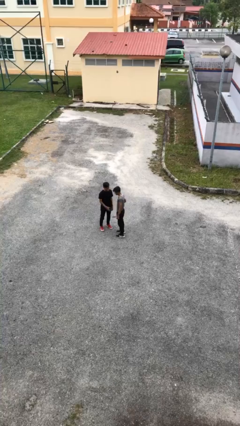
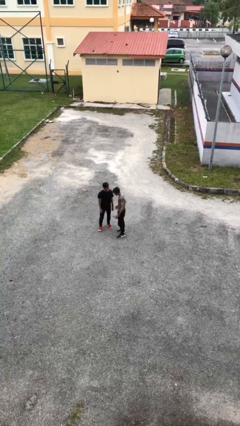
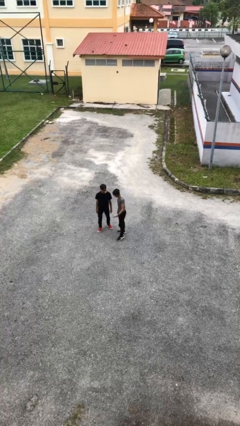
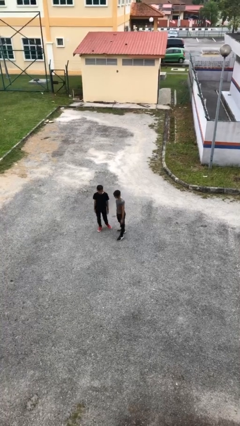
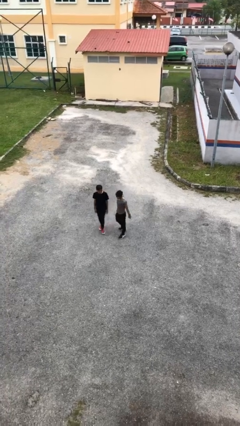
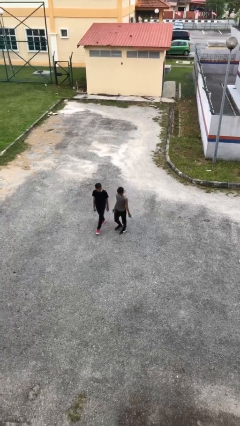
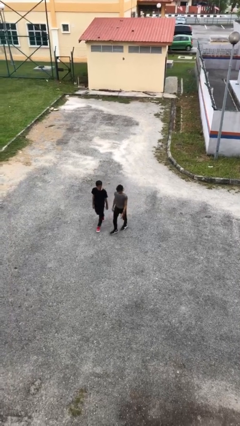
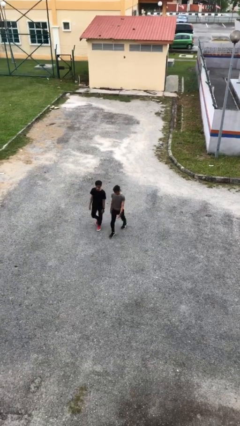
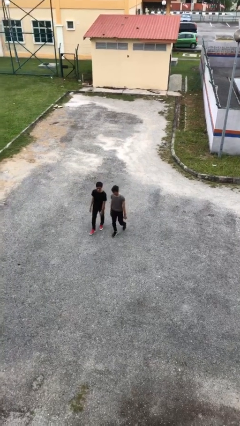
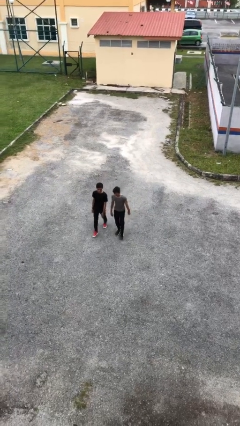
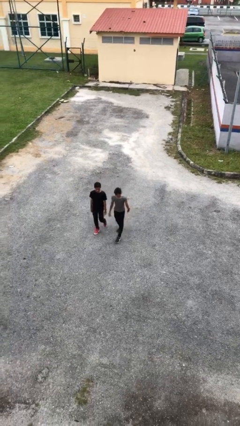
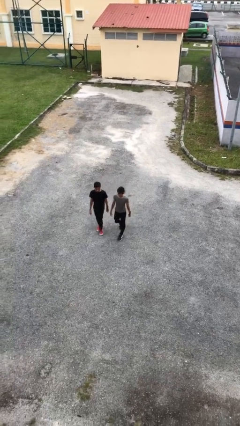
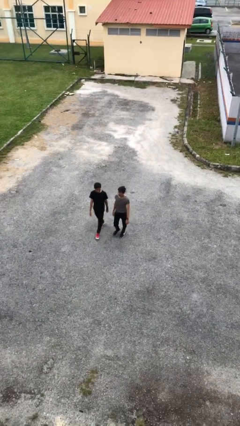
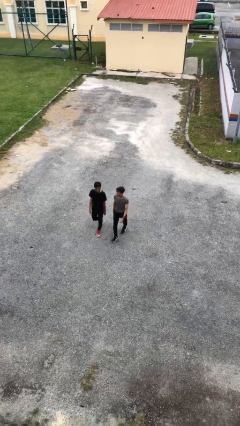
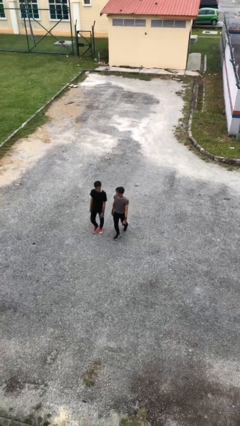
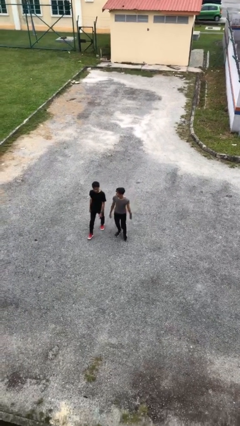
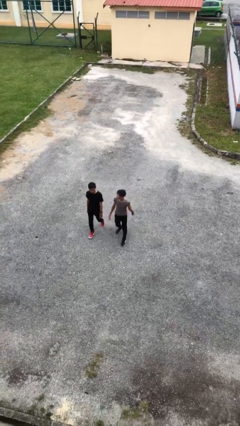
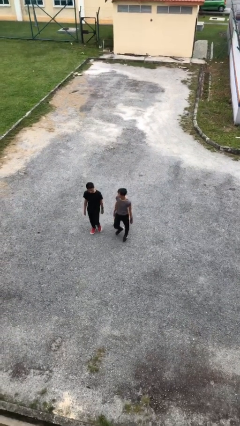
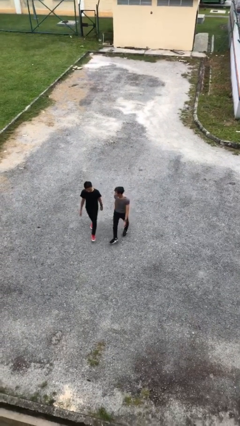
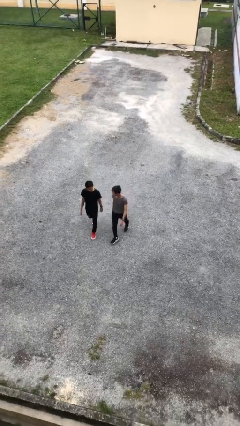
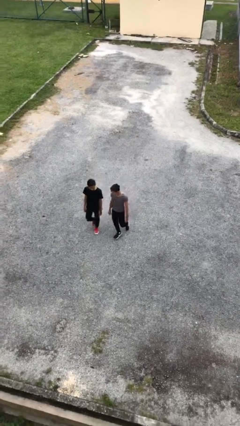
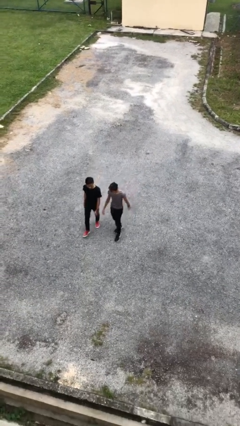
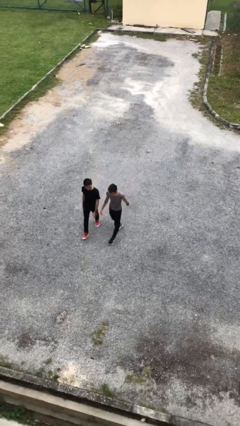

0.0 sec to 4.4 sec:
person talks to person

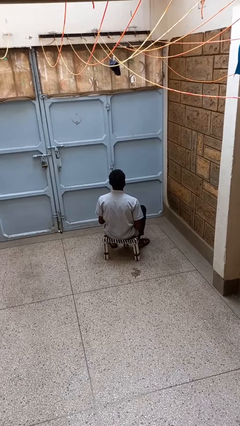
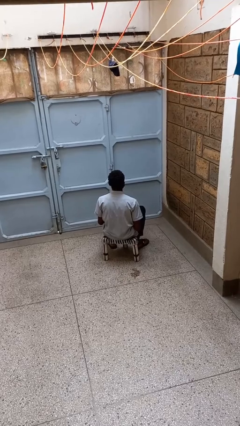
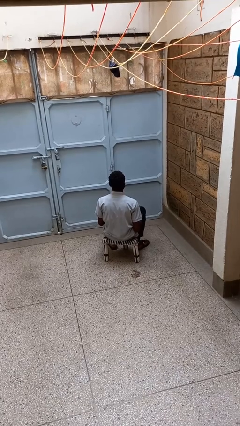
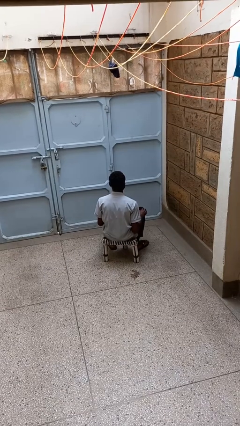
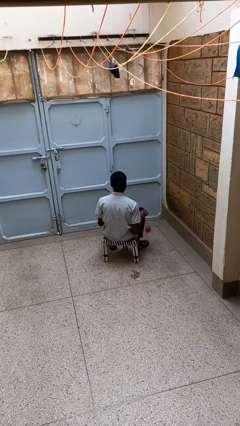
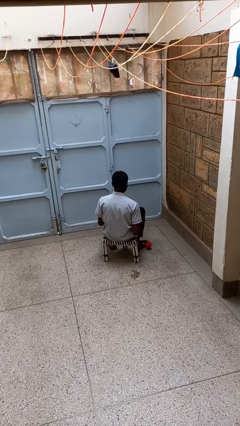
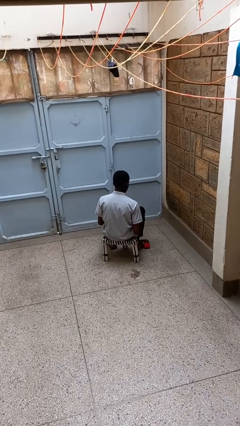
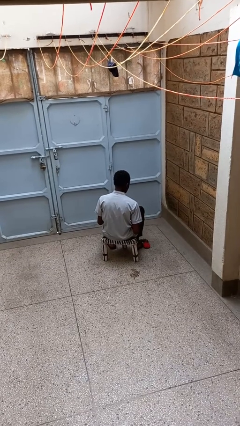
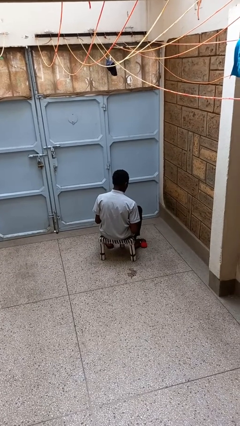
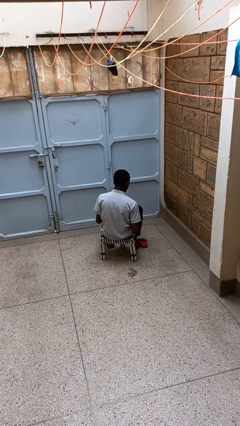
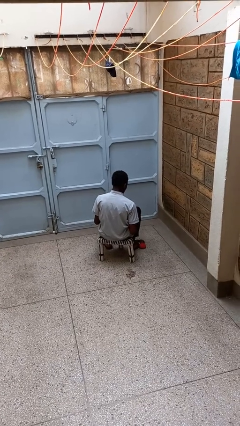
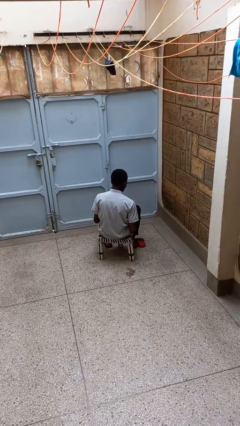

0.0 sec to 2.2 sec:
person drops object

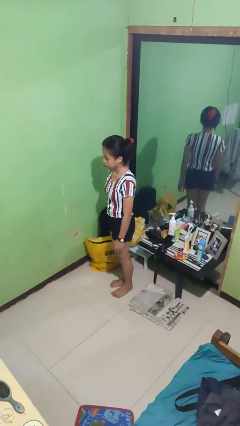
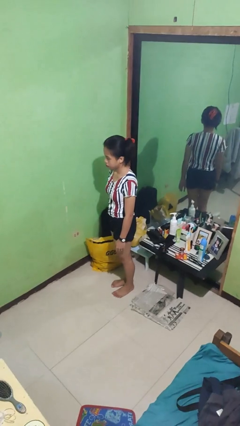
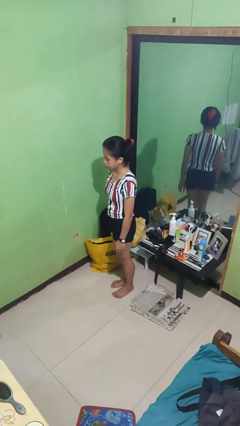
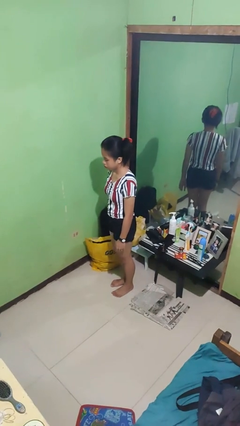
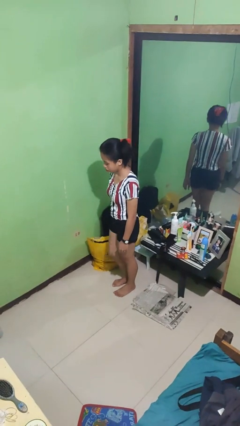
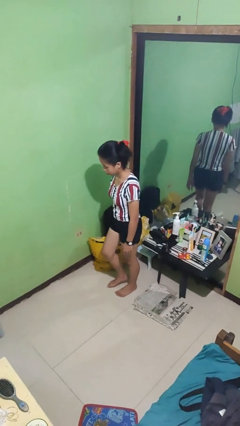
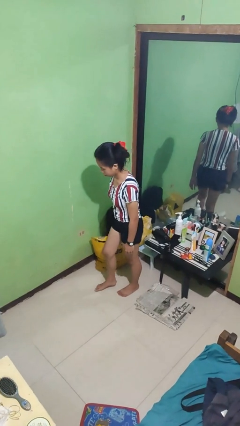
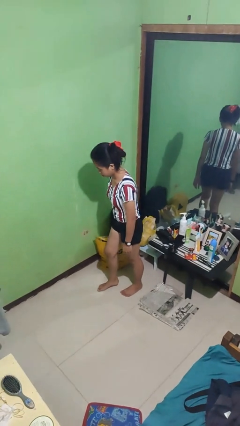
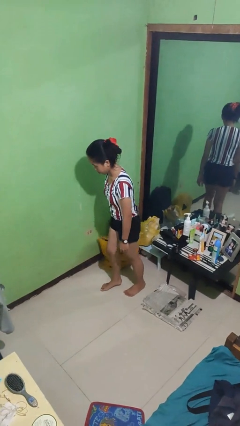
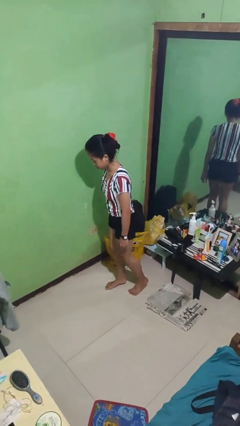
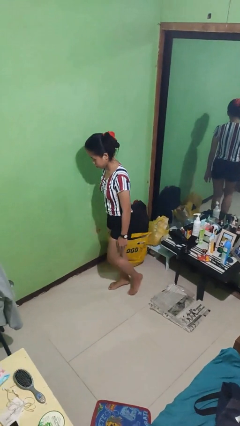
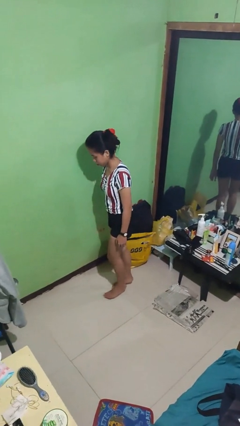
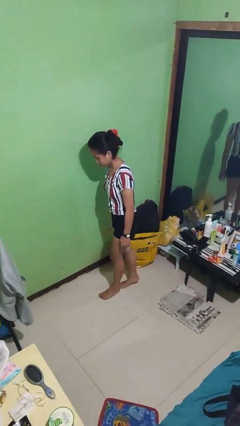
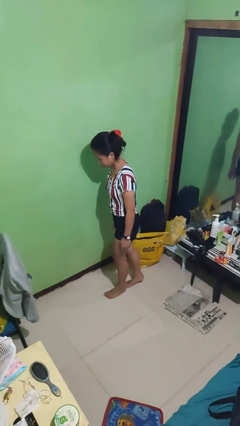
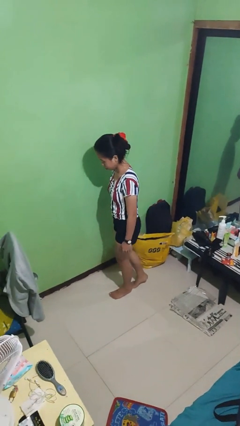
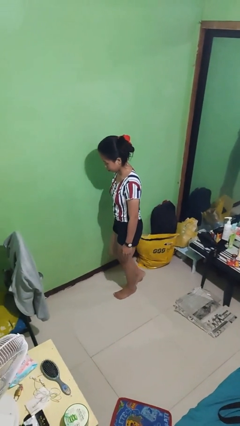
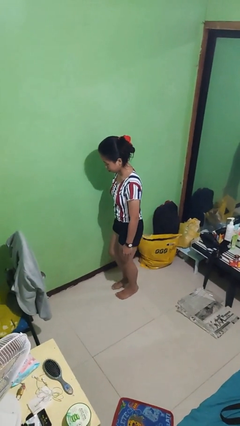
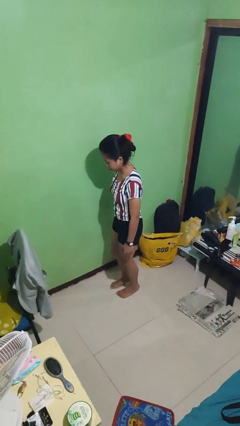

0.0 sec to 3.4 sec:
person walks tiptoe

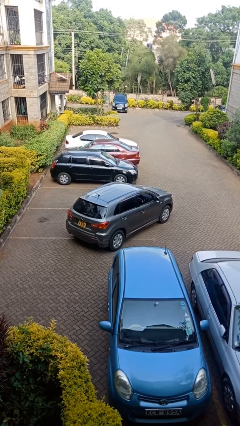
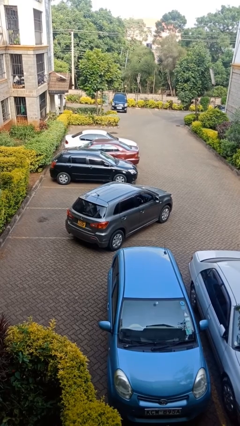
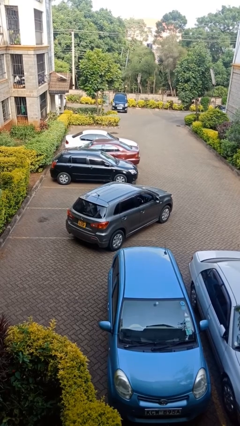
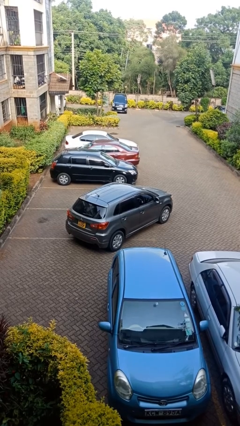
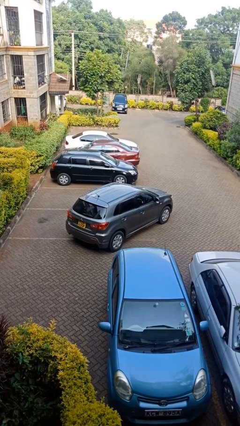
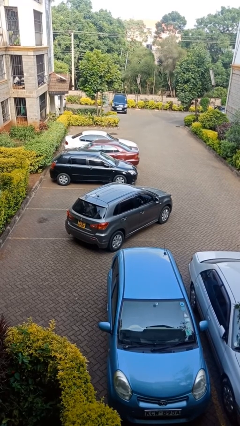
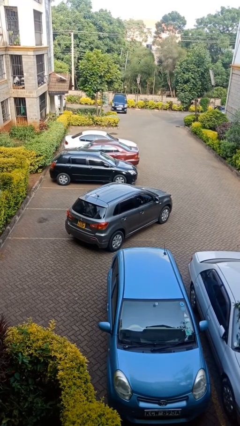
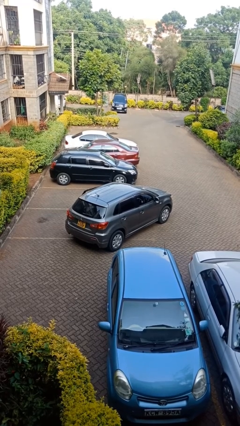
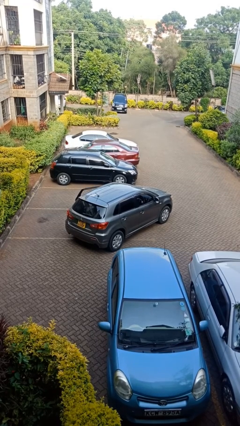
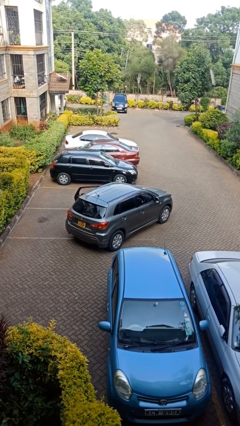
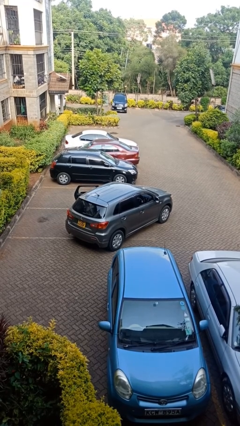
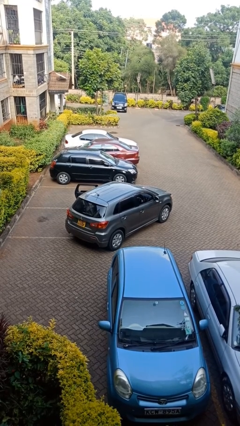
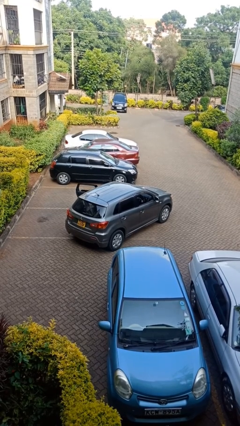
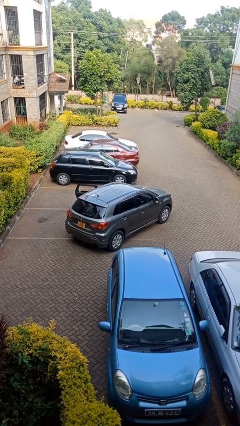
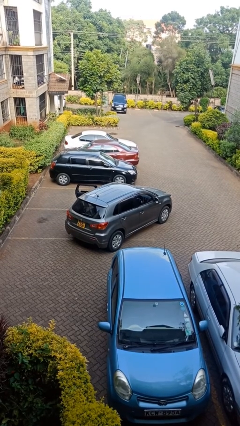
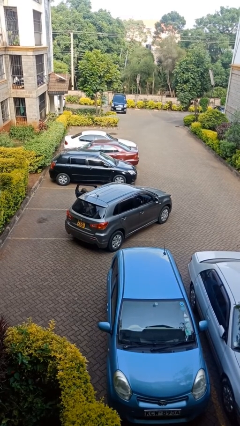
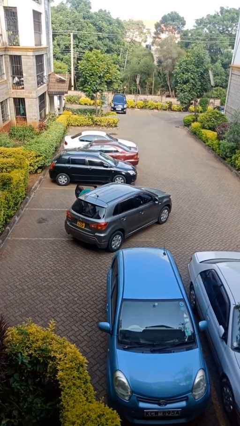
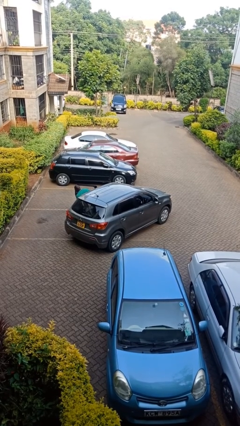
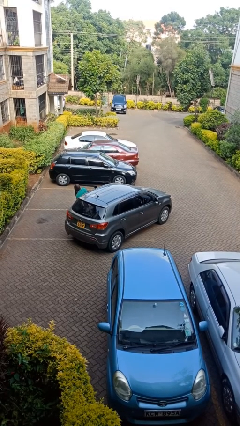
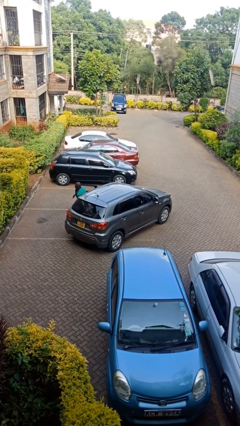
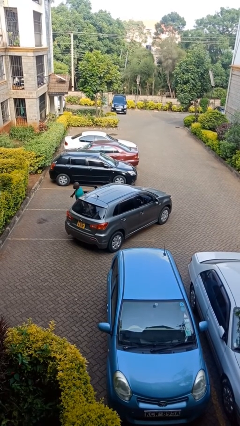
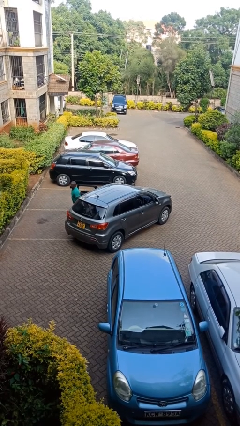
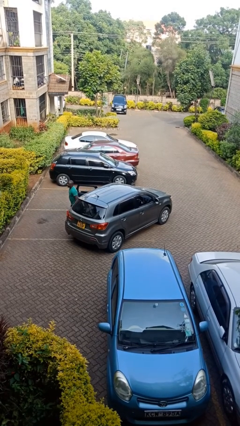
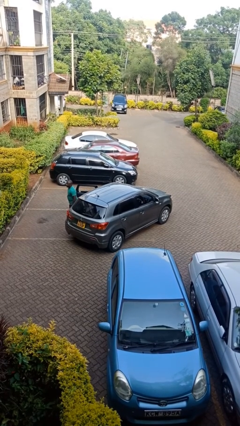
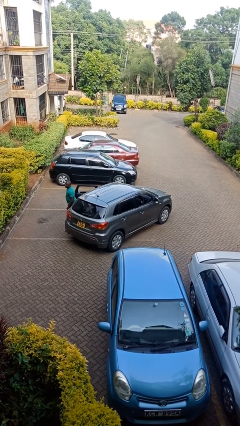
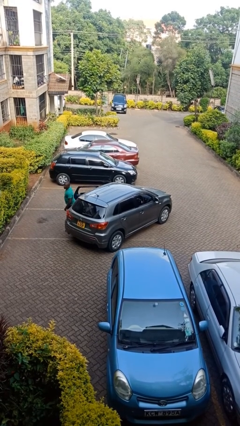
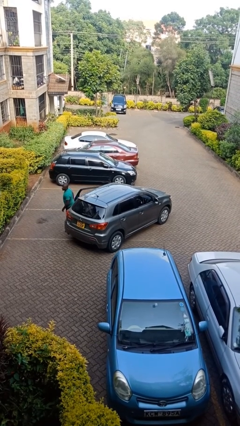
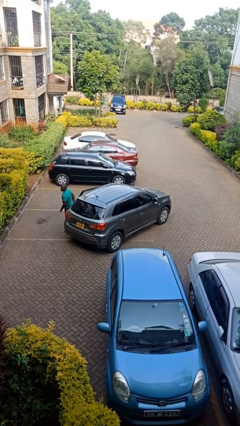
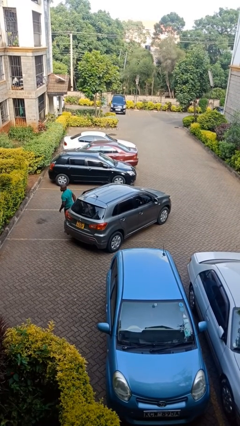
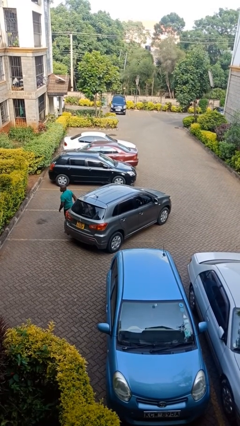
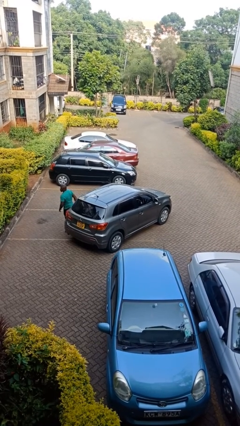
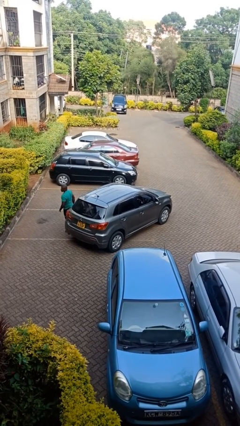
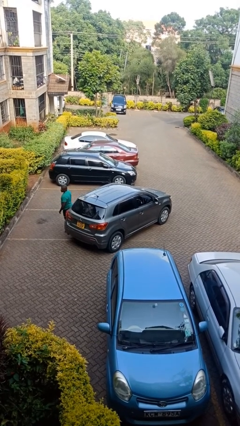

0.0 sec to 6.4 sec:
car drops off person

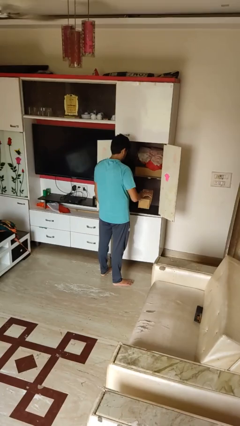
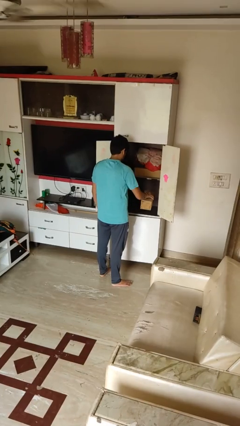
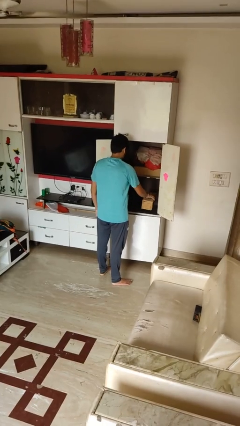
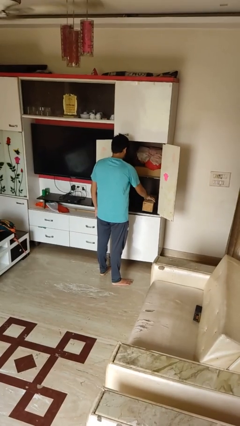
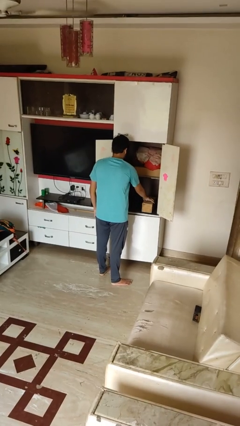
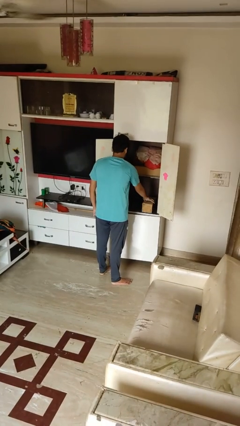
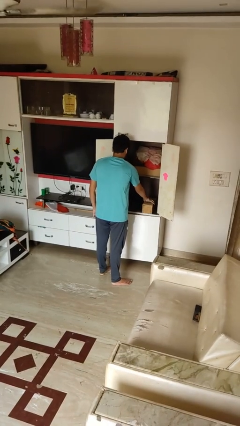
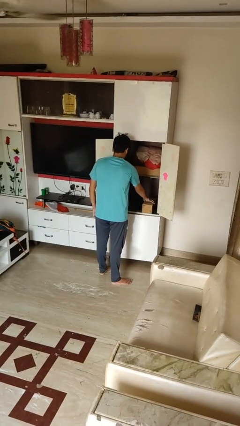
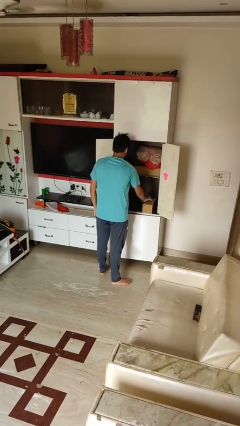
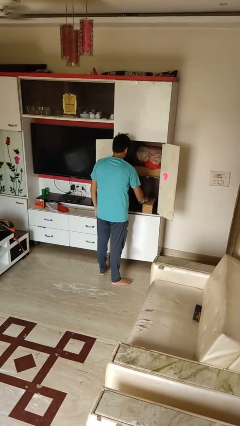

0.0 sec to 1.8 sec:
person puts down object into cabinet
